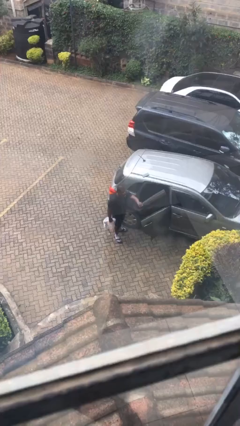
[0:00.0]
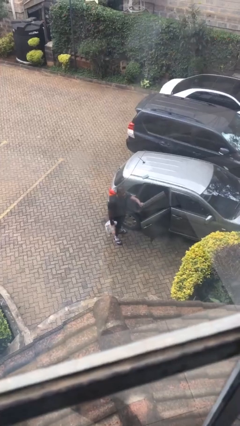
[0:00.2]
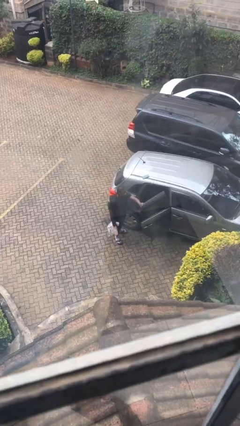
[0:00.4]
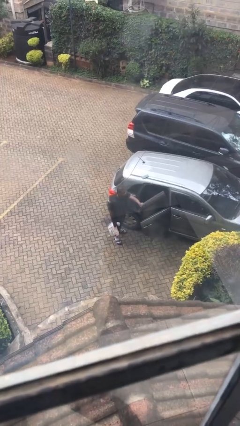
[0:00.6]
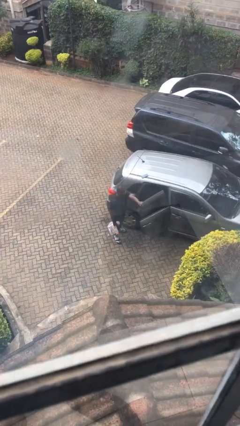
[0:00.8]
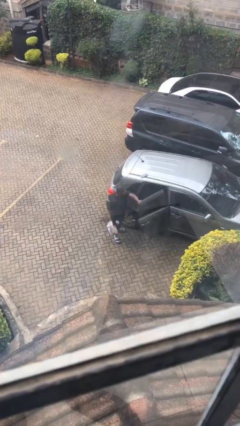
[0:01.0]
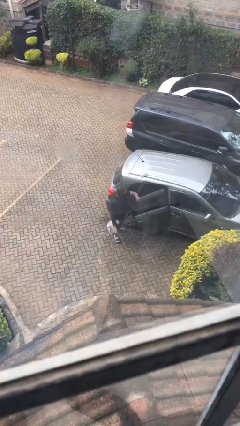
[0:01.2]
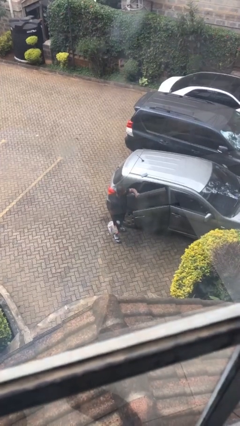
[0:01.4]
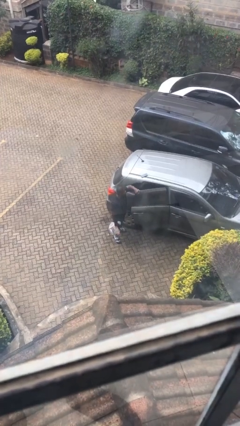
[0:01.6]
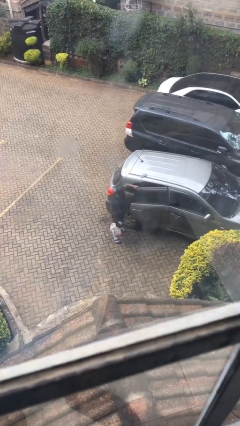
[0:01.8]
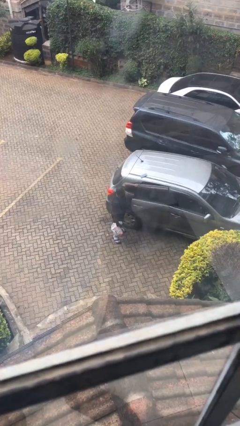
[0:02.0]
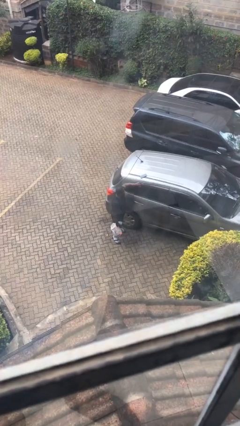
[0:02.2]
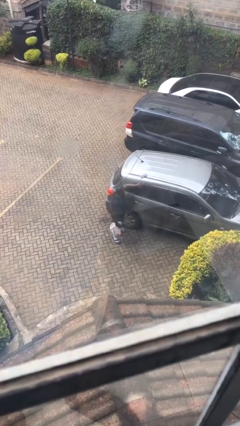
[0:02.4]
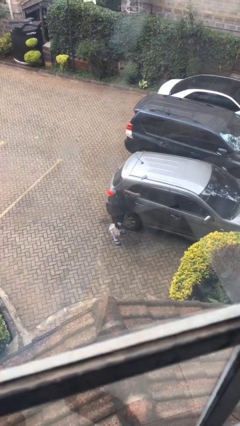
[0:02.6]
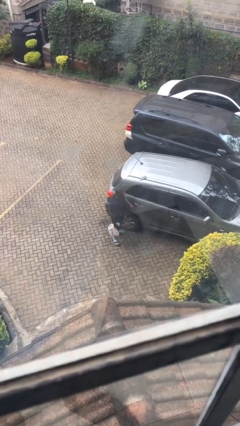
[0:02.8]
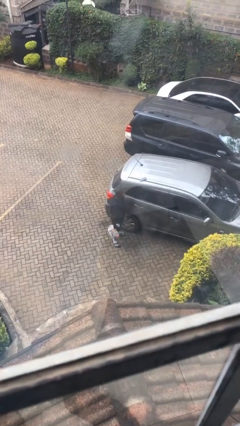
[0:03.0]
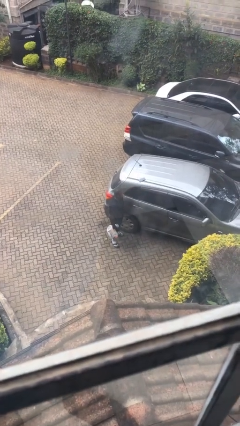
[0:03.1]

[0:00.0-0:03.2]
person closes car door

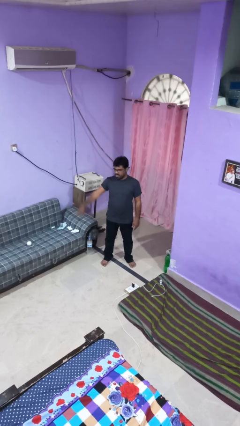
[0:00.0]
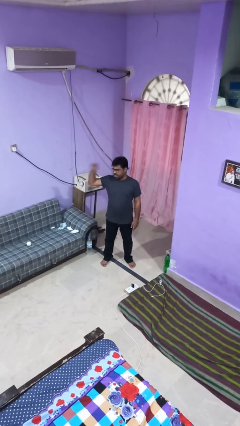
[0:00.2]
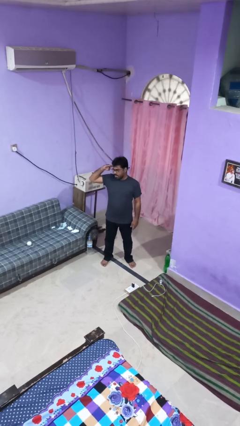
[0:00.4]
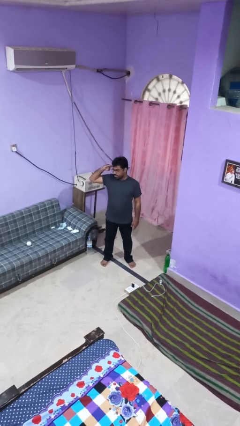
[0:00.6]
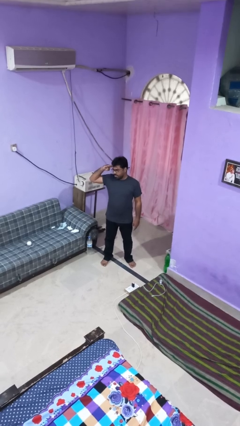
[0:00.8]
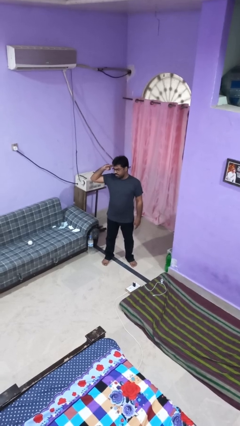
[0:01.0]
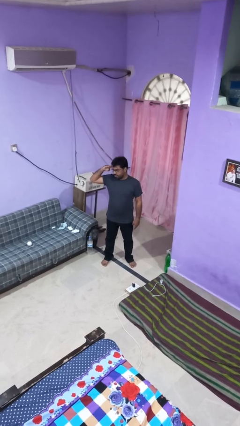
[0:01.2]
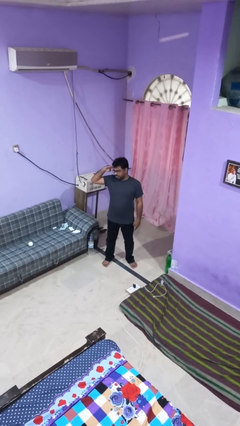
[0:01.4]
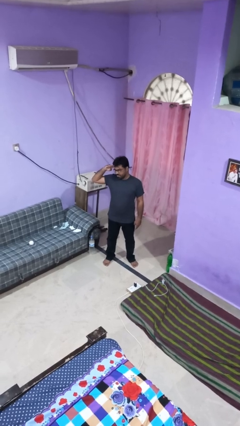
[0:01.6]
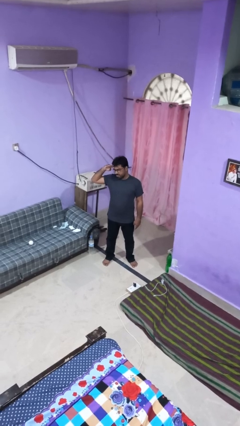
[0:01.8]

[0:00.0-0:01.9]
person salutes

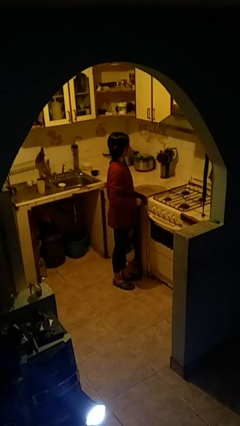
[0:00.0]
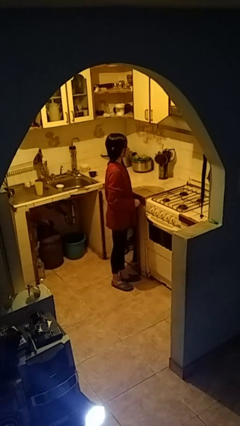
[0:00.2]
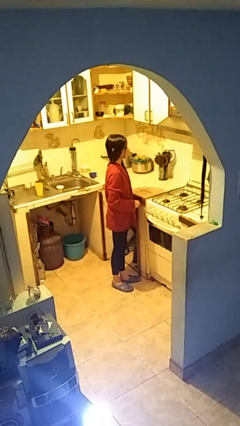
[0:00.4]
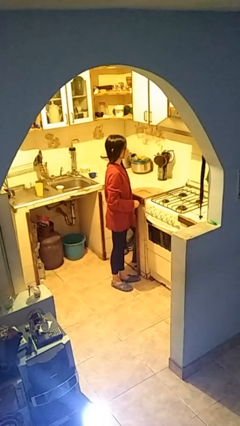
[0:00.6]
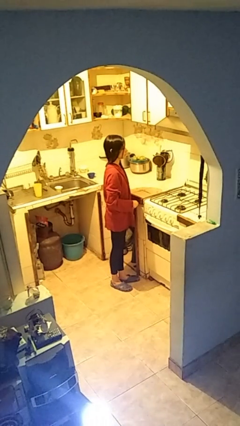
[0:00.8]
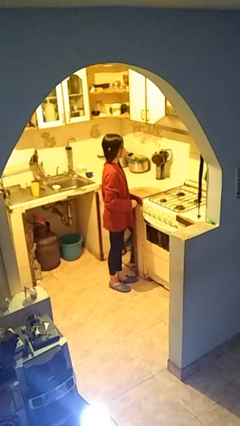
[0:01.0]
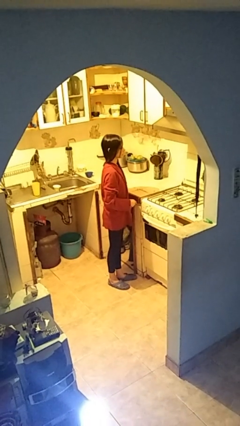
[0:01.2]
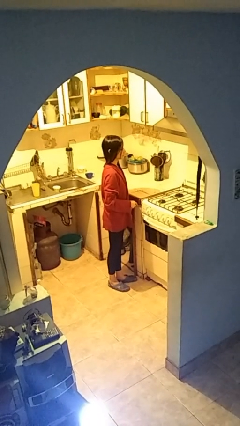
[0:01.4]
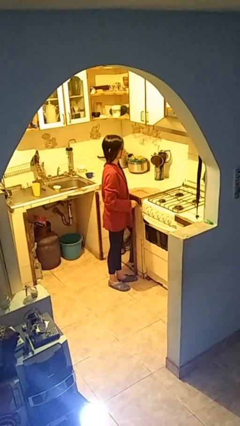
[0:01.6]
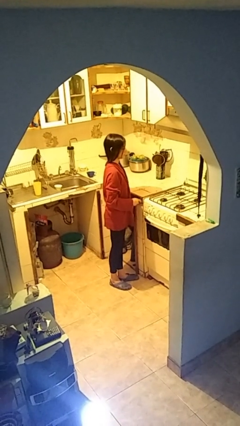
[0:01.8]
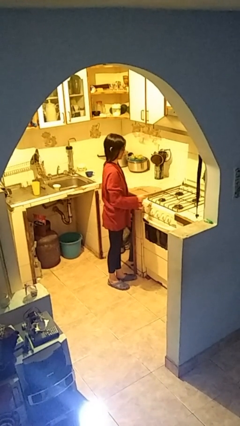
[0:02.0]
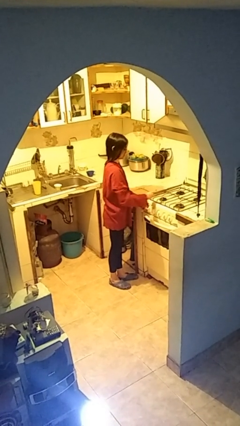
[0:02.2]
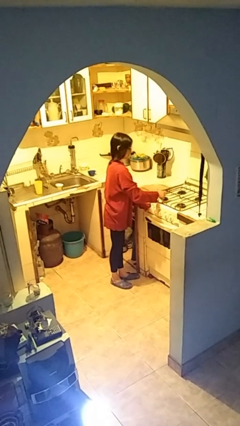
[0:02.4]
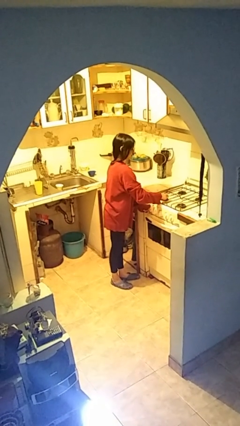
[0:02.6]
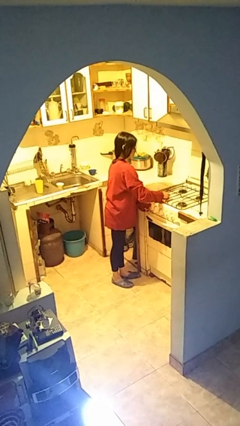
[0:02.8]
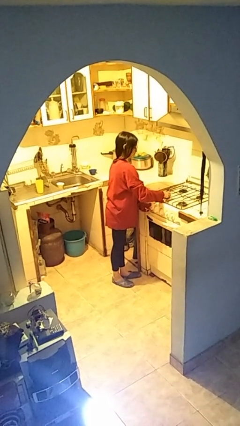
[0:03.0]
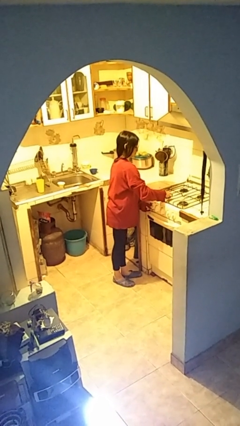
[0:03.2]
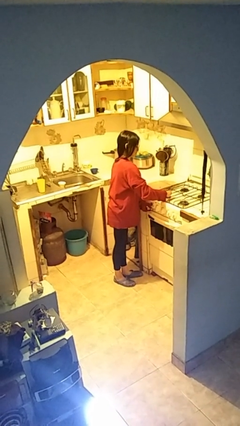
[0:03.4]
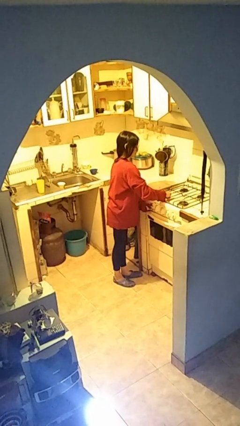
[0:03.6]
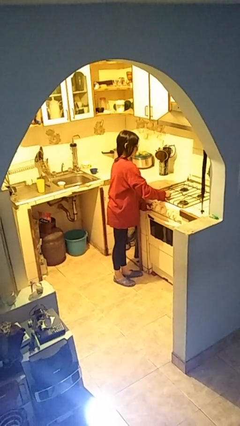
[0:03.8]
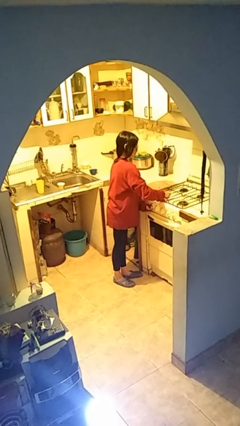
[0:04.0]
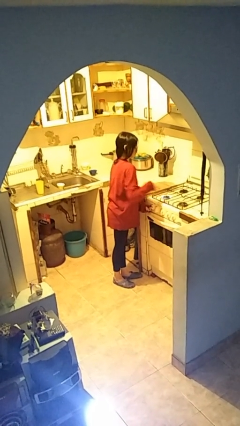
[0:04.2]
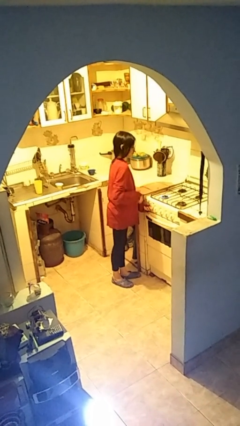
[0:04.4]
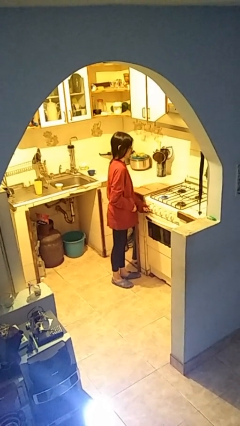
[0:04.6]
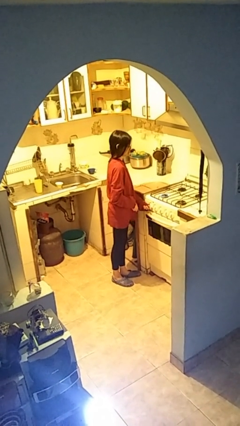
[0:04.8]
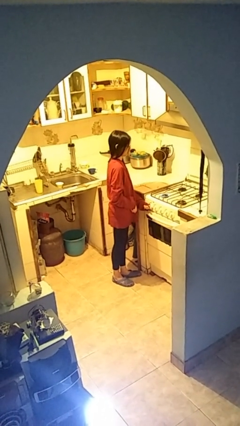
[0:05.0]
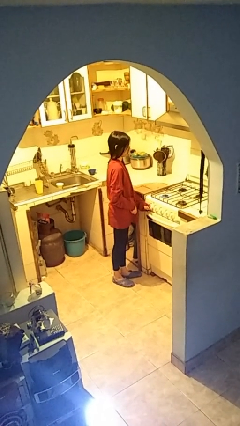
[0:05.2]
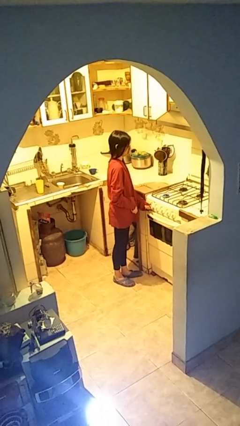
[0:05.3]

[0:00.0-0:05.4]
person turns on stovetop

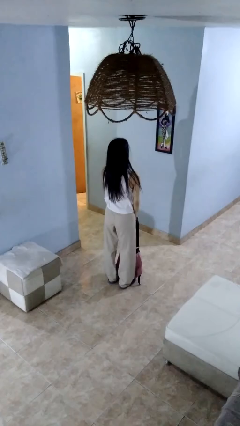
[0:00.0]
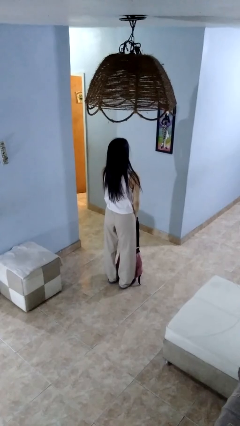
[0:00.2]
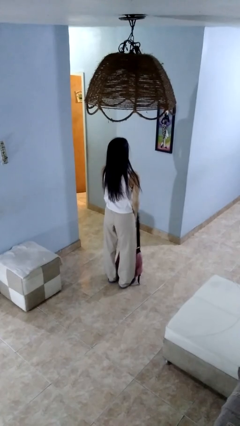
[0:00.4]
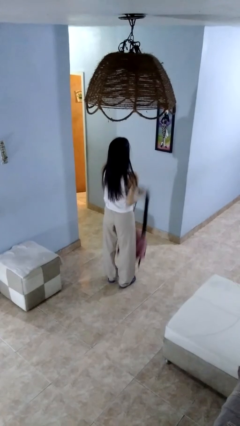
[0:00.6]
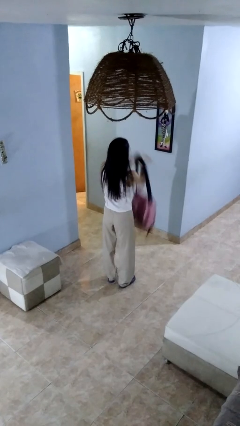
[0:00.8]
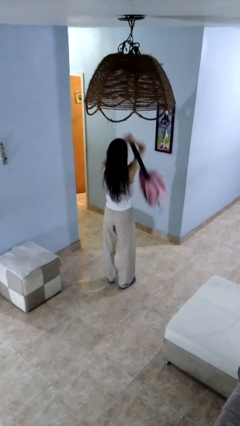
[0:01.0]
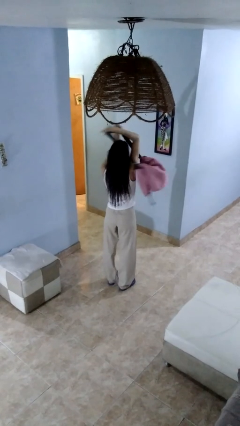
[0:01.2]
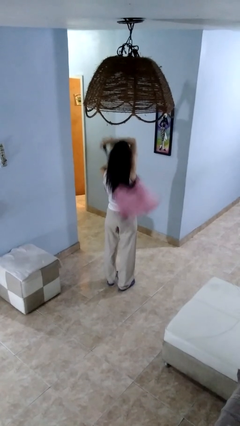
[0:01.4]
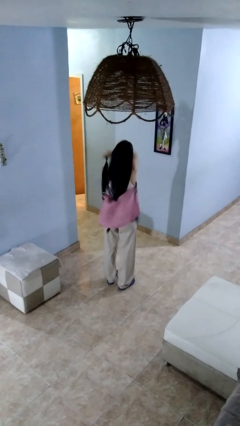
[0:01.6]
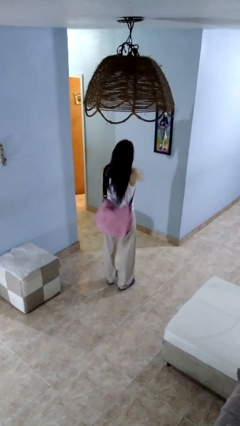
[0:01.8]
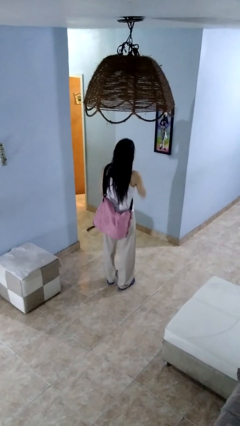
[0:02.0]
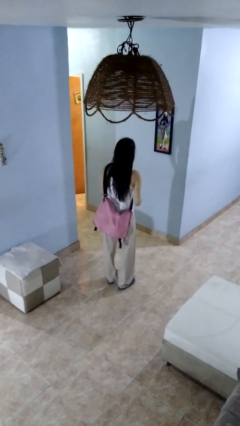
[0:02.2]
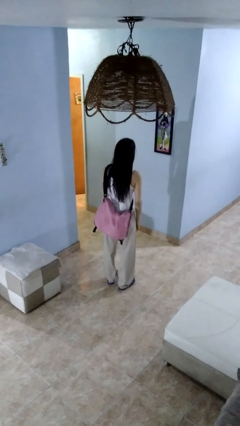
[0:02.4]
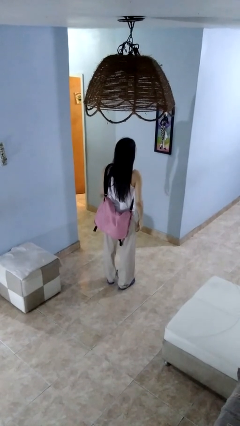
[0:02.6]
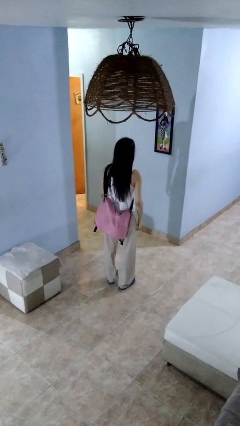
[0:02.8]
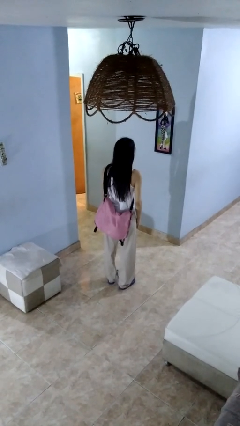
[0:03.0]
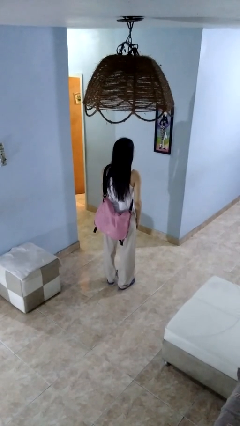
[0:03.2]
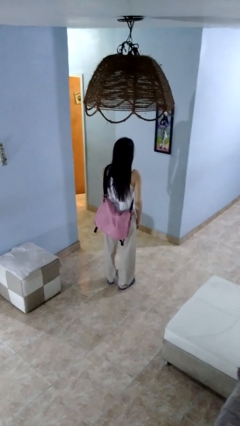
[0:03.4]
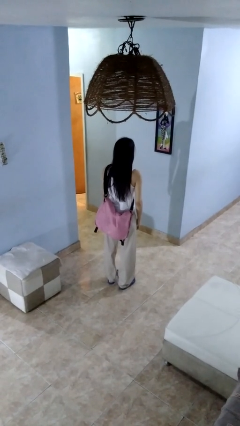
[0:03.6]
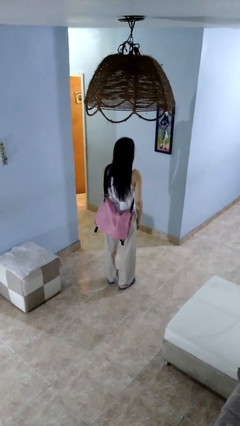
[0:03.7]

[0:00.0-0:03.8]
person puts on backpack

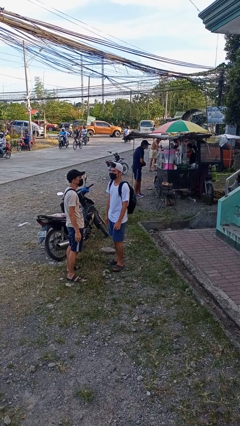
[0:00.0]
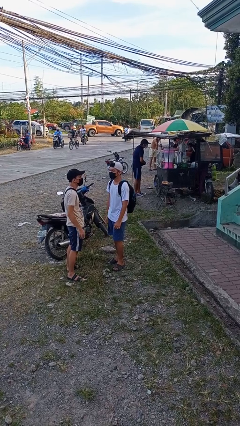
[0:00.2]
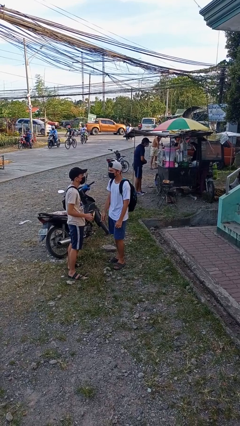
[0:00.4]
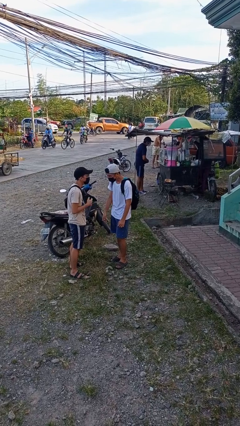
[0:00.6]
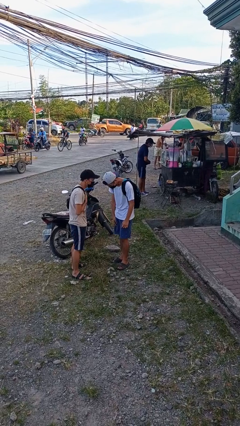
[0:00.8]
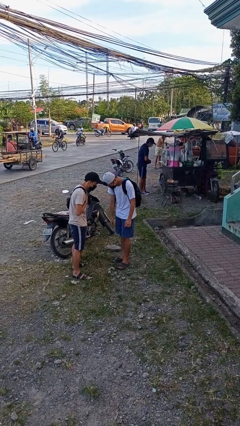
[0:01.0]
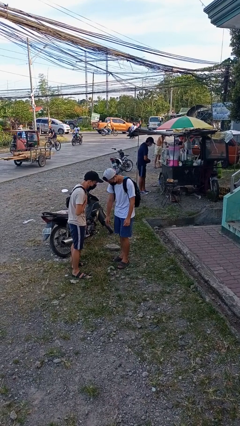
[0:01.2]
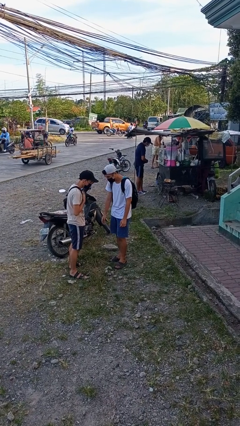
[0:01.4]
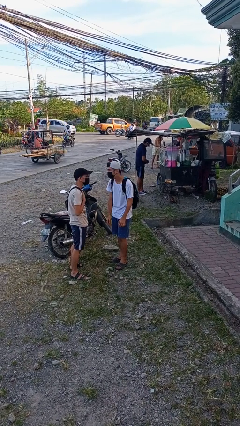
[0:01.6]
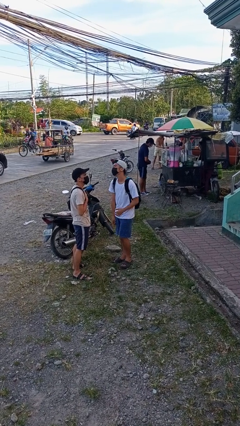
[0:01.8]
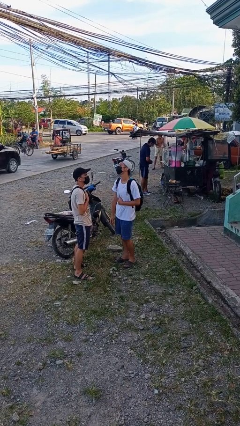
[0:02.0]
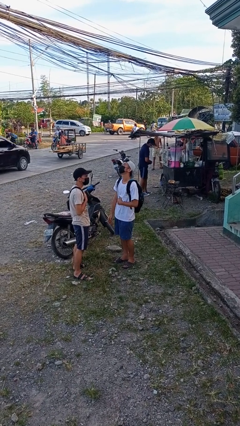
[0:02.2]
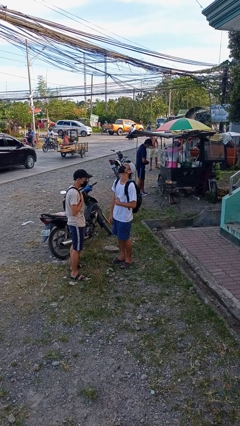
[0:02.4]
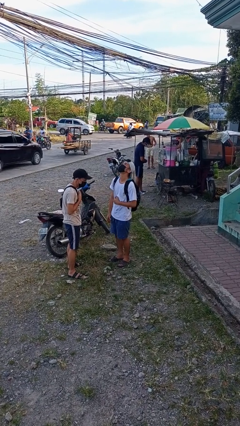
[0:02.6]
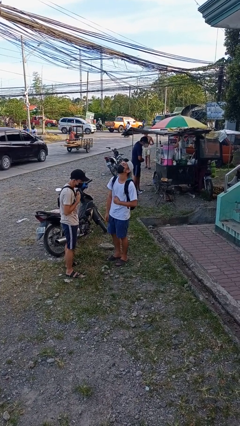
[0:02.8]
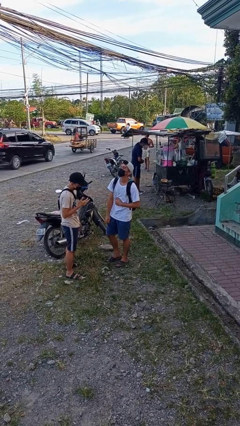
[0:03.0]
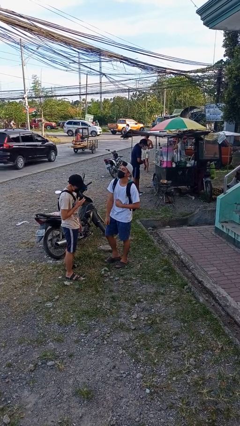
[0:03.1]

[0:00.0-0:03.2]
person laughs with person

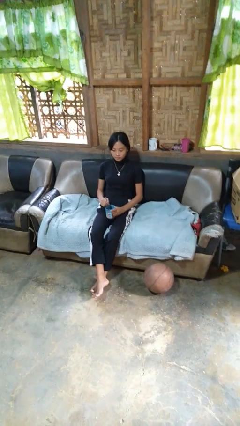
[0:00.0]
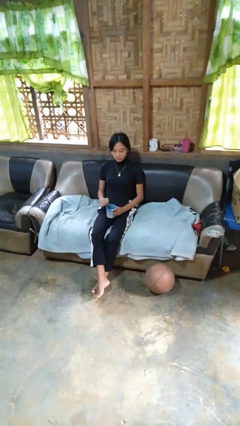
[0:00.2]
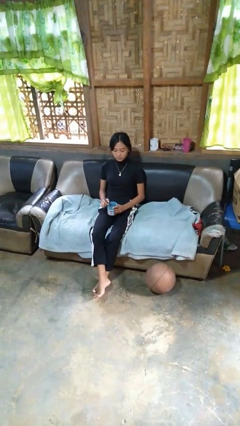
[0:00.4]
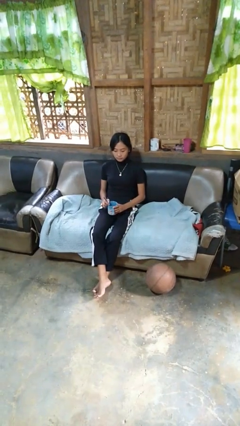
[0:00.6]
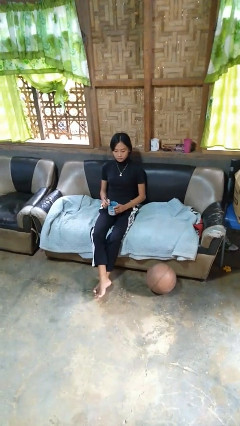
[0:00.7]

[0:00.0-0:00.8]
person stirs mug
